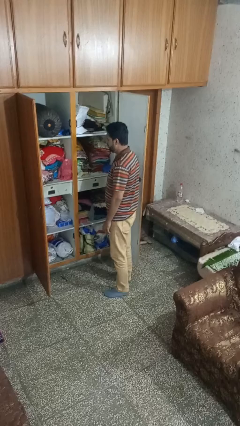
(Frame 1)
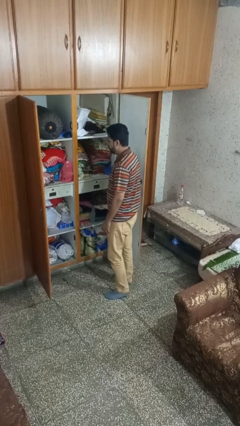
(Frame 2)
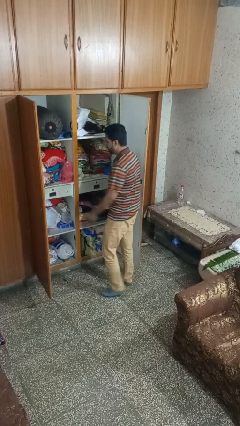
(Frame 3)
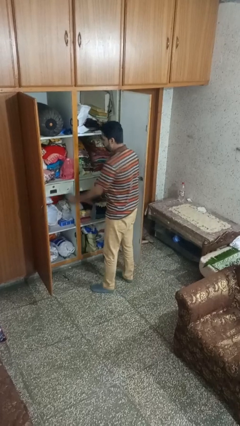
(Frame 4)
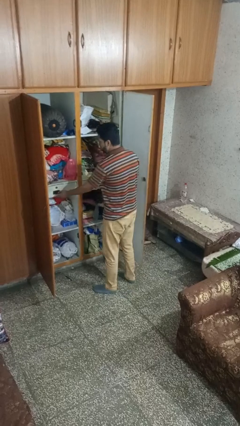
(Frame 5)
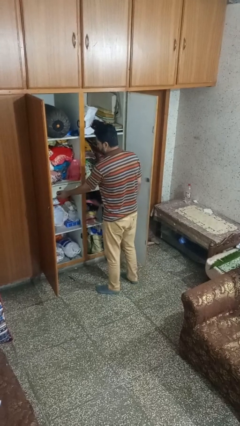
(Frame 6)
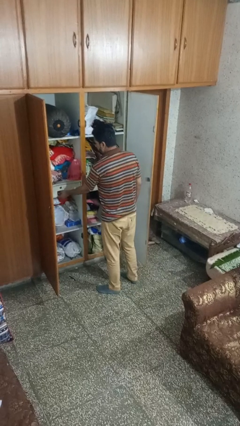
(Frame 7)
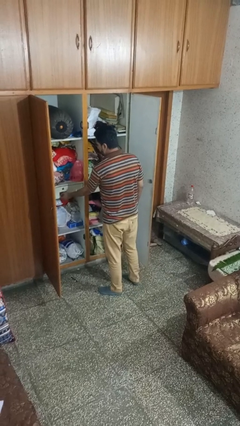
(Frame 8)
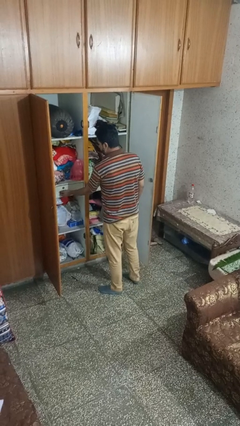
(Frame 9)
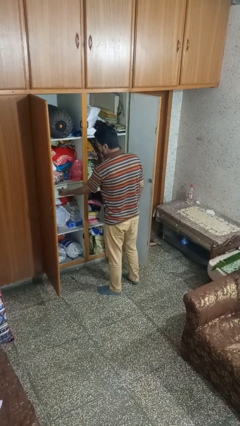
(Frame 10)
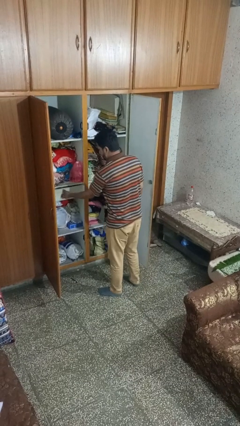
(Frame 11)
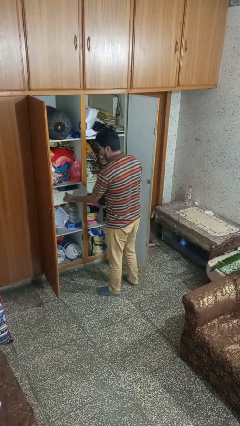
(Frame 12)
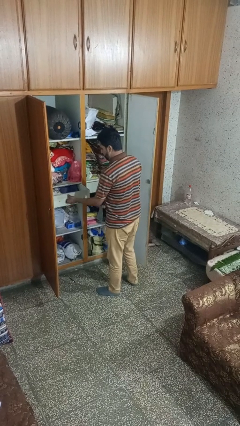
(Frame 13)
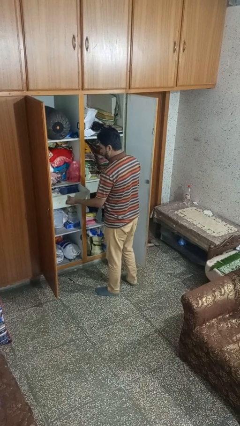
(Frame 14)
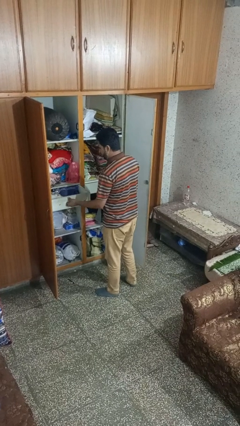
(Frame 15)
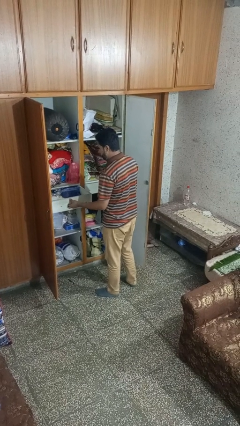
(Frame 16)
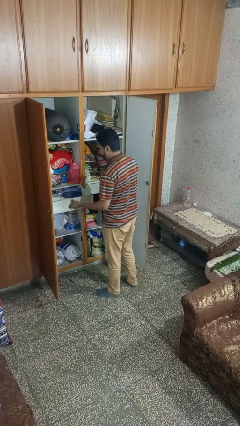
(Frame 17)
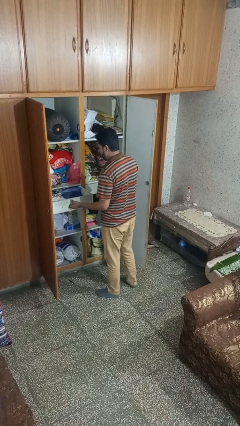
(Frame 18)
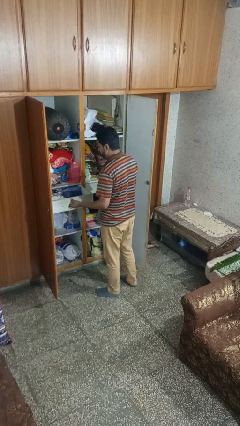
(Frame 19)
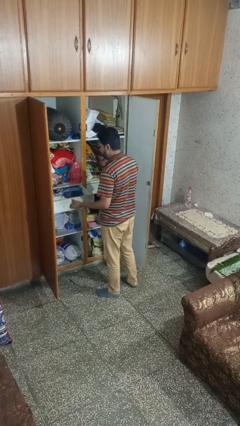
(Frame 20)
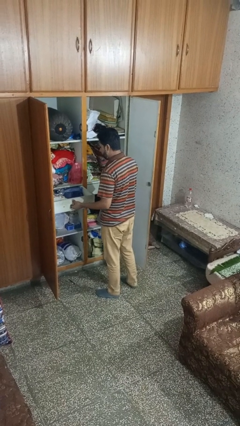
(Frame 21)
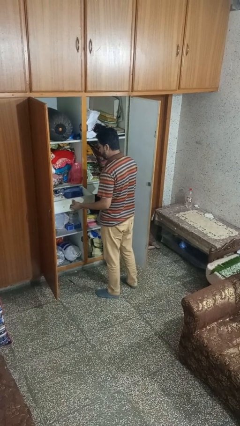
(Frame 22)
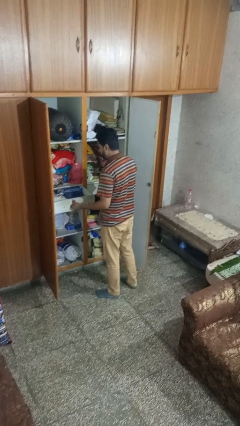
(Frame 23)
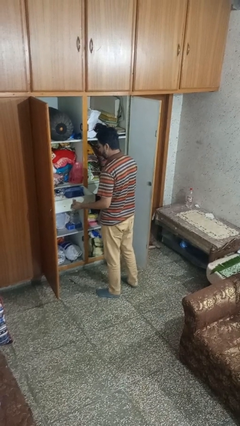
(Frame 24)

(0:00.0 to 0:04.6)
person opens dresser drawer

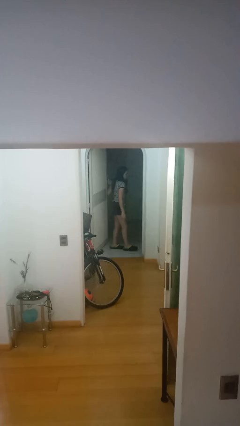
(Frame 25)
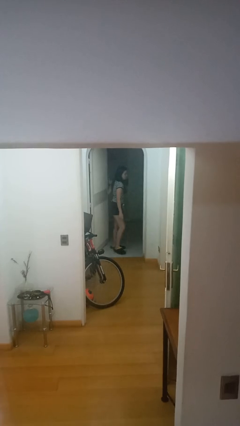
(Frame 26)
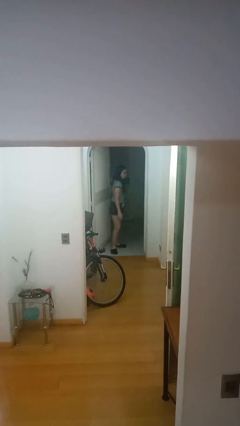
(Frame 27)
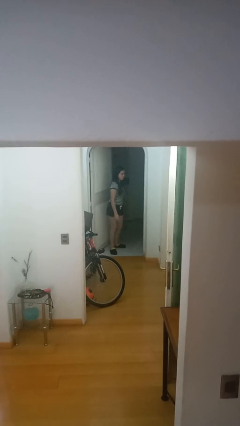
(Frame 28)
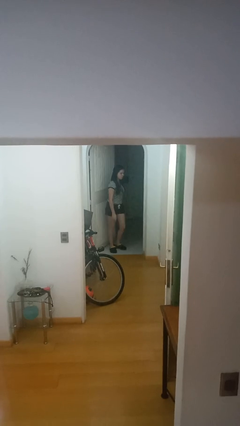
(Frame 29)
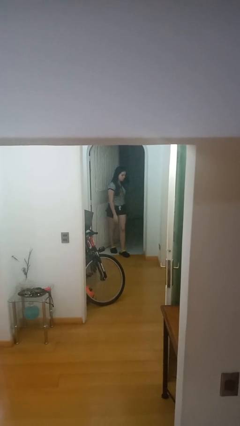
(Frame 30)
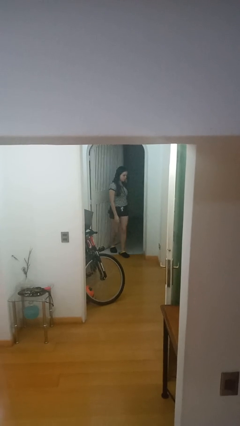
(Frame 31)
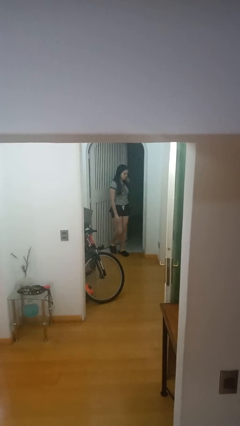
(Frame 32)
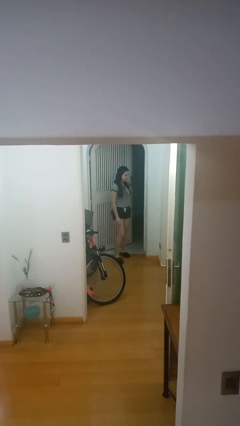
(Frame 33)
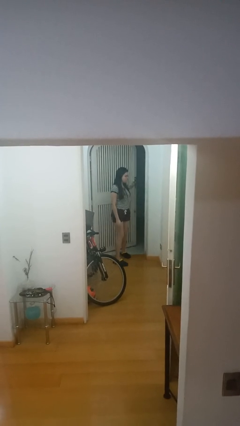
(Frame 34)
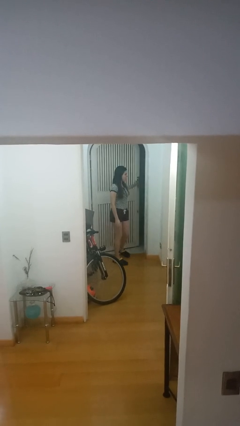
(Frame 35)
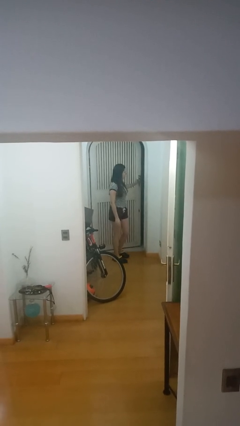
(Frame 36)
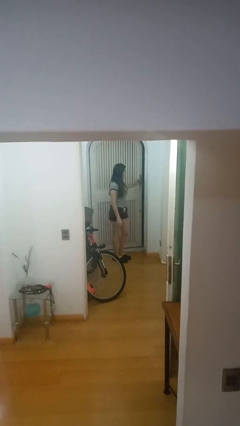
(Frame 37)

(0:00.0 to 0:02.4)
person closes facility door

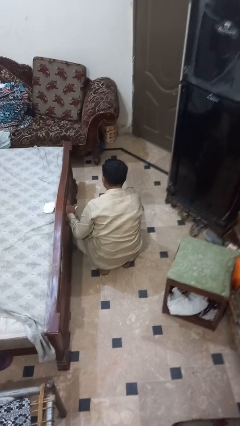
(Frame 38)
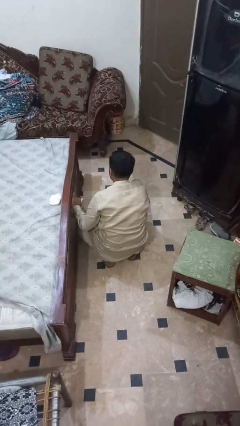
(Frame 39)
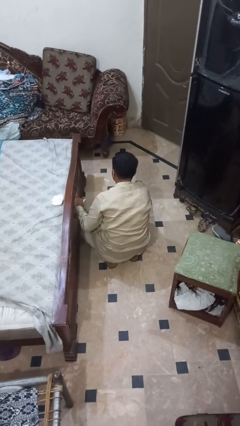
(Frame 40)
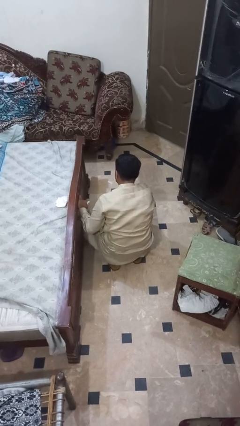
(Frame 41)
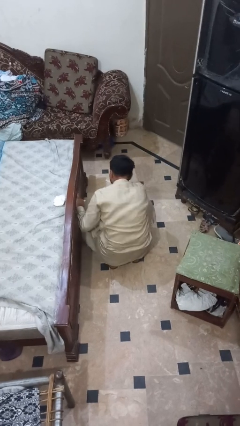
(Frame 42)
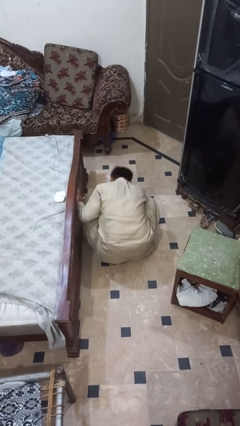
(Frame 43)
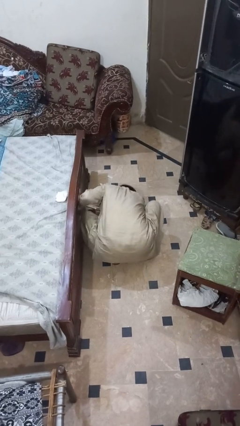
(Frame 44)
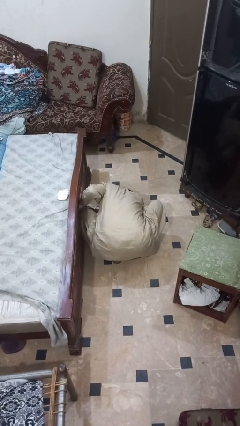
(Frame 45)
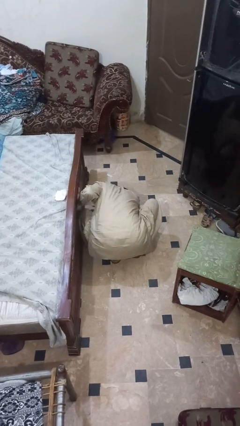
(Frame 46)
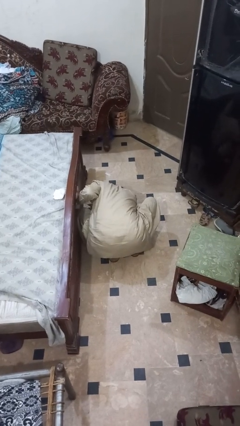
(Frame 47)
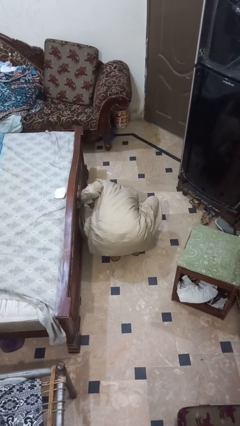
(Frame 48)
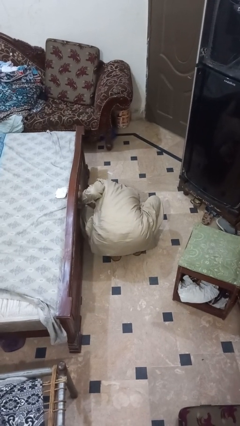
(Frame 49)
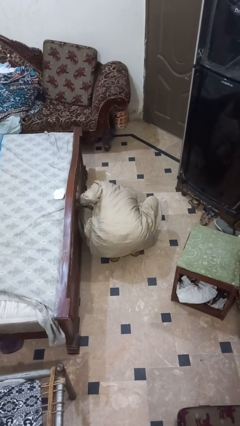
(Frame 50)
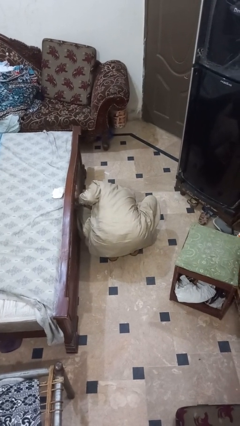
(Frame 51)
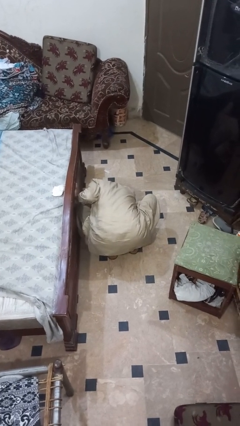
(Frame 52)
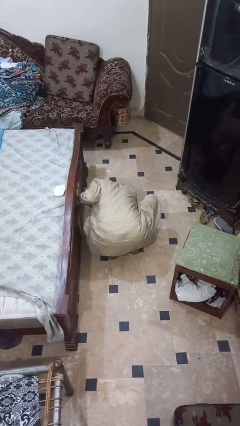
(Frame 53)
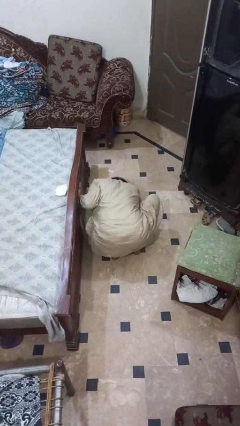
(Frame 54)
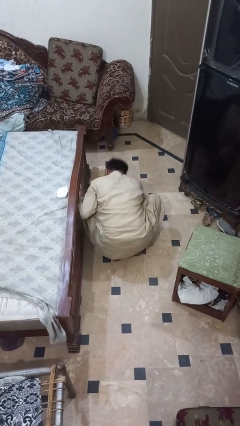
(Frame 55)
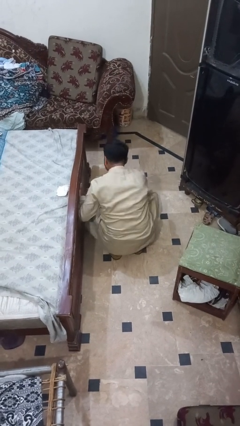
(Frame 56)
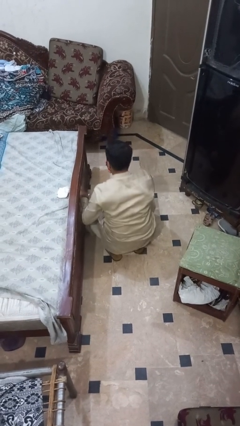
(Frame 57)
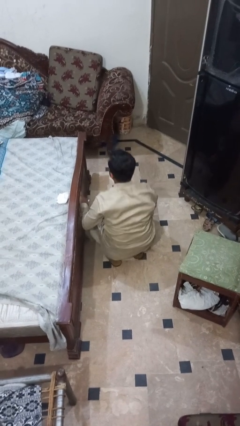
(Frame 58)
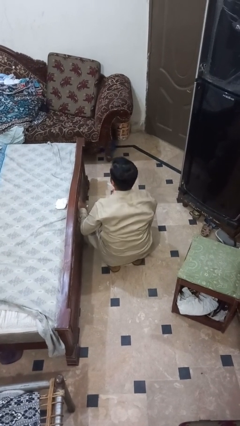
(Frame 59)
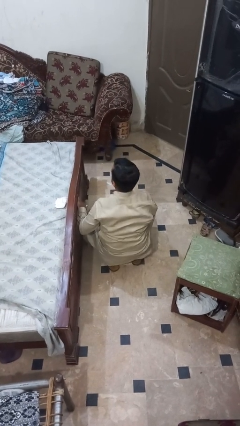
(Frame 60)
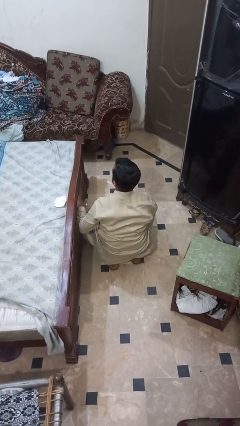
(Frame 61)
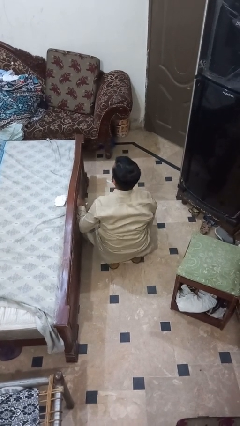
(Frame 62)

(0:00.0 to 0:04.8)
person searches under bed

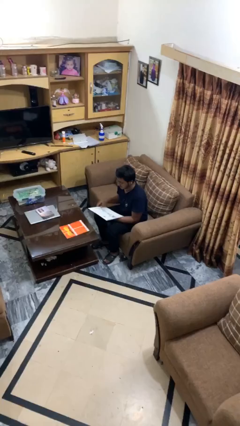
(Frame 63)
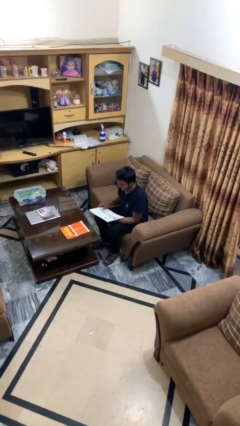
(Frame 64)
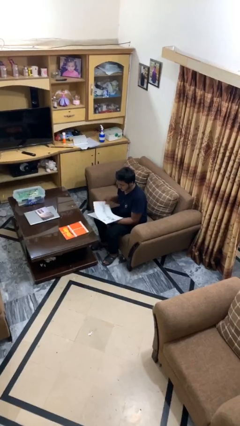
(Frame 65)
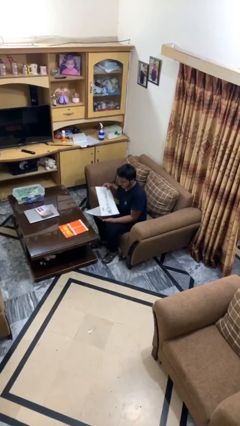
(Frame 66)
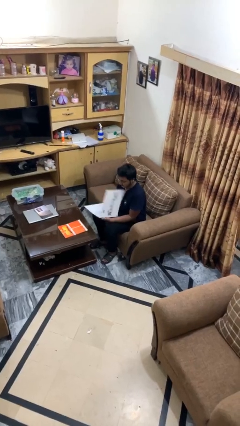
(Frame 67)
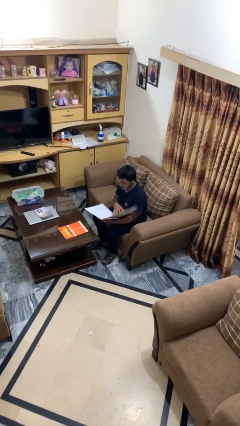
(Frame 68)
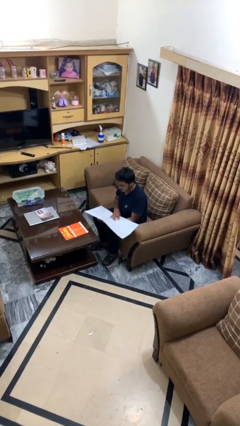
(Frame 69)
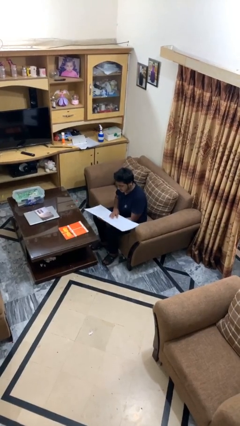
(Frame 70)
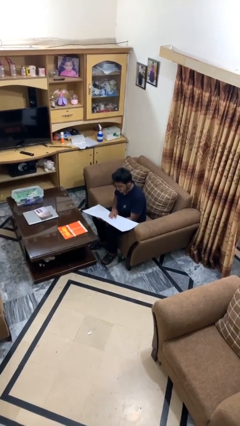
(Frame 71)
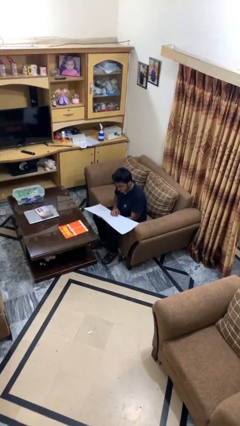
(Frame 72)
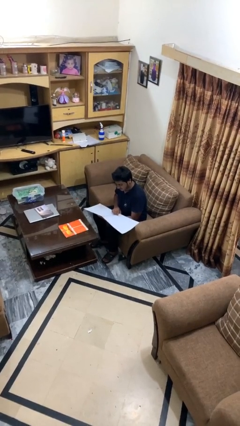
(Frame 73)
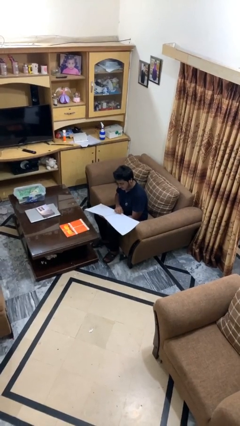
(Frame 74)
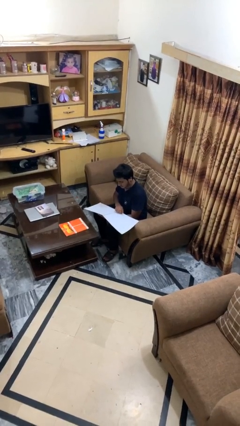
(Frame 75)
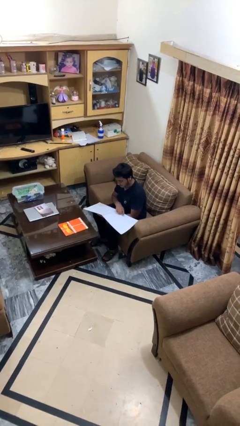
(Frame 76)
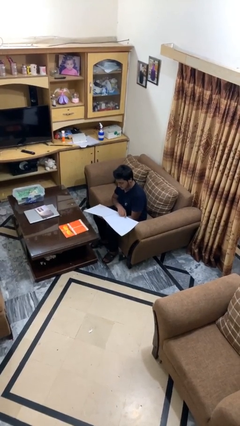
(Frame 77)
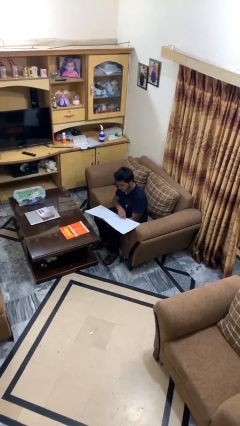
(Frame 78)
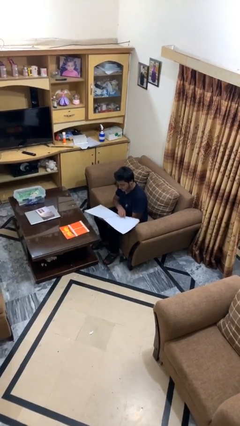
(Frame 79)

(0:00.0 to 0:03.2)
person reads document

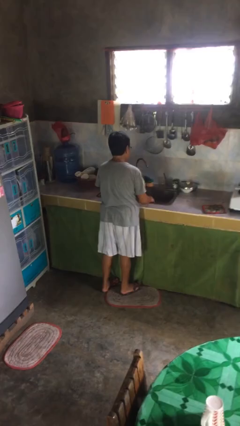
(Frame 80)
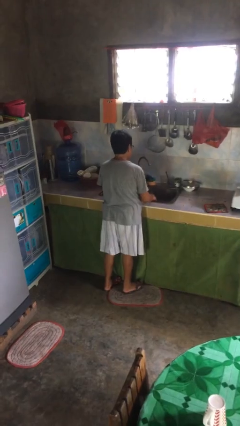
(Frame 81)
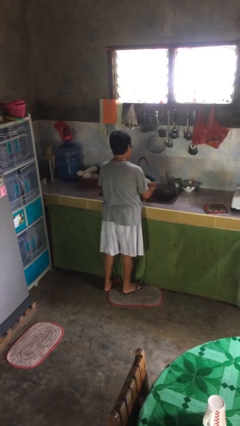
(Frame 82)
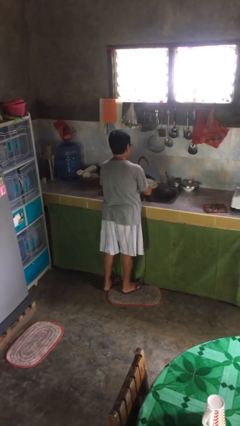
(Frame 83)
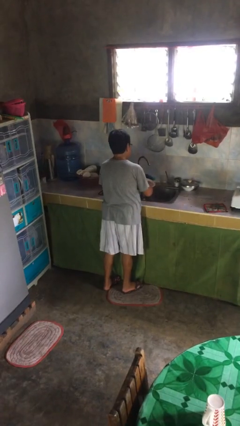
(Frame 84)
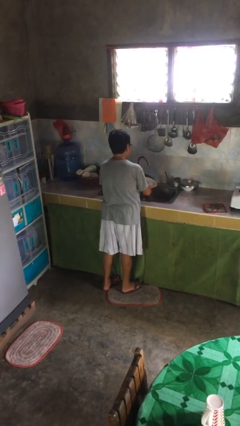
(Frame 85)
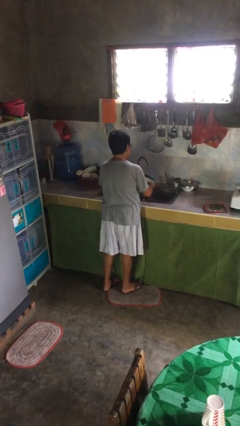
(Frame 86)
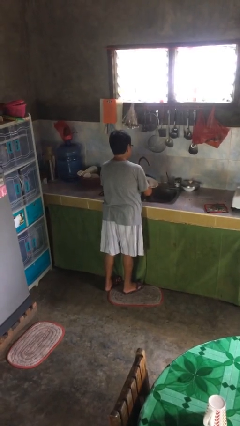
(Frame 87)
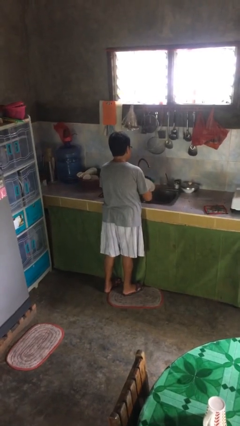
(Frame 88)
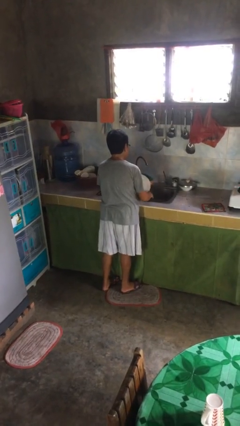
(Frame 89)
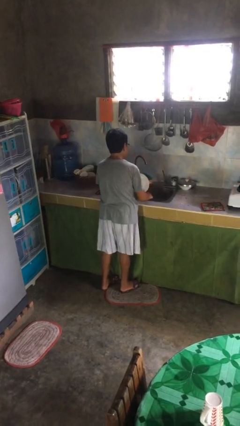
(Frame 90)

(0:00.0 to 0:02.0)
person washes dish

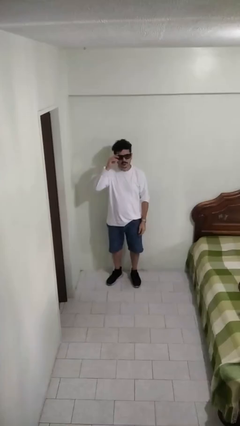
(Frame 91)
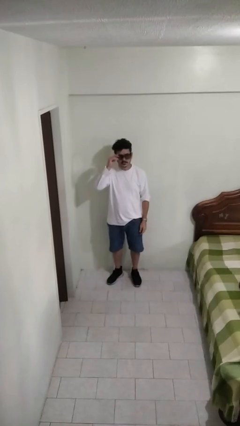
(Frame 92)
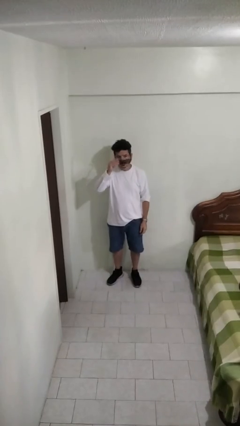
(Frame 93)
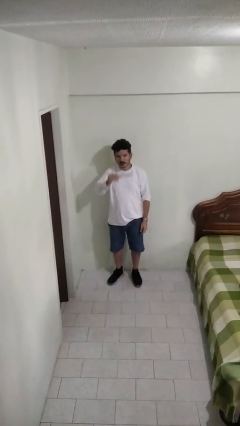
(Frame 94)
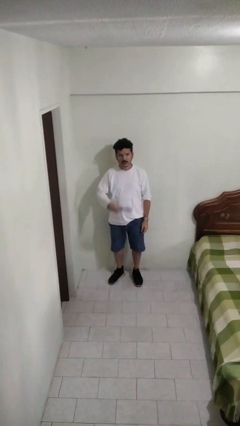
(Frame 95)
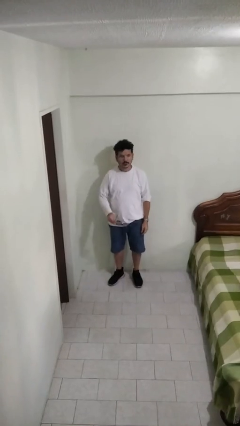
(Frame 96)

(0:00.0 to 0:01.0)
person takes off sunglasses
